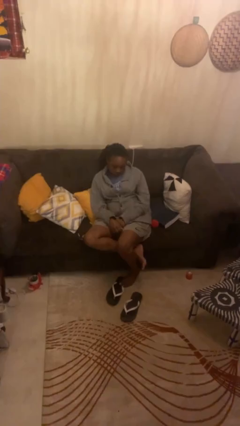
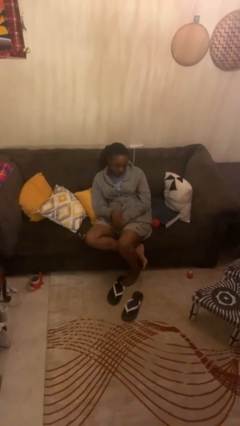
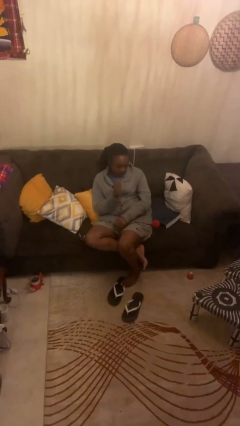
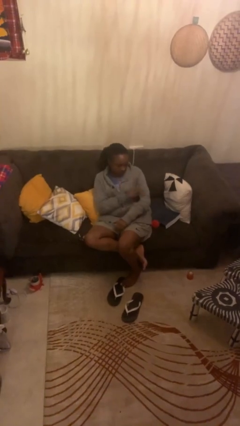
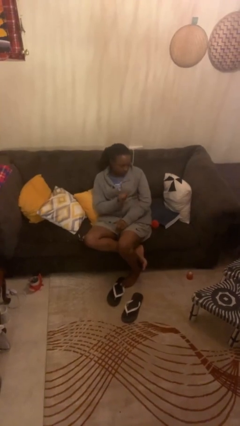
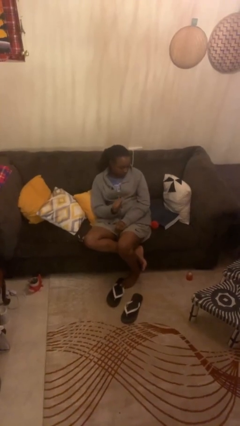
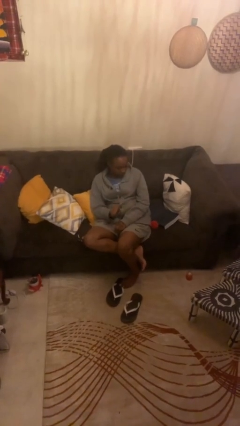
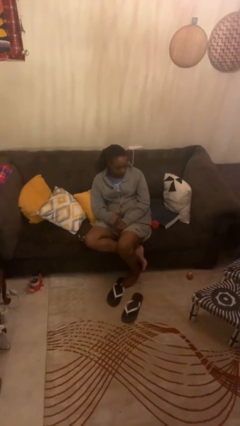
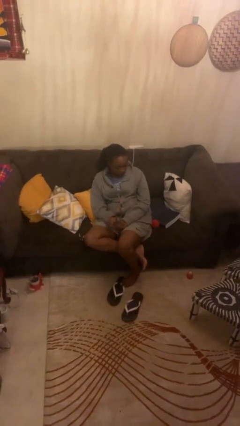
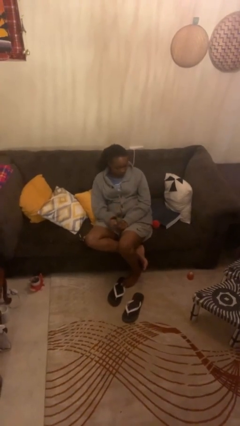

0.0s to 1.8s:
person swats bug

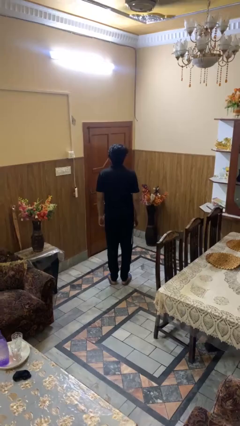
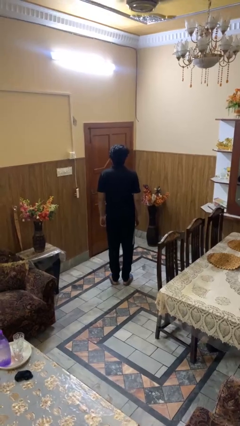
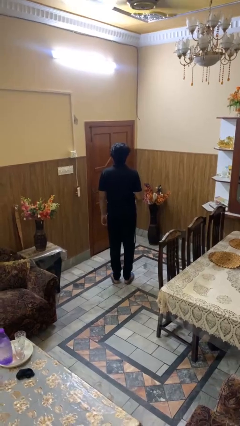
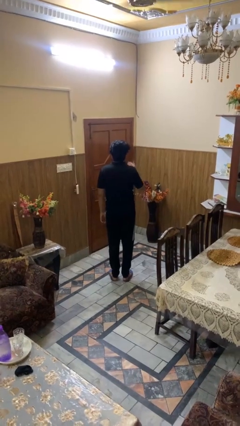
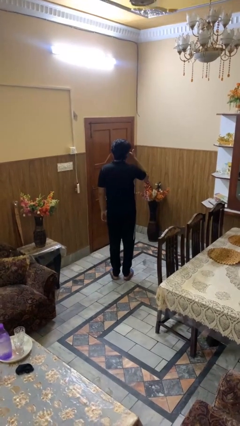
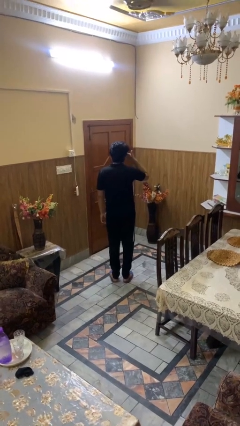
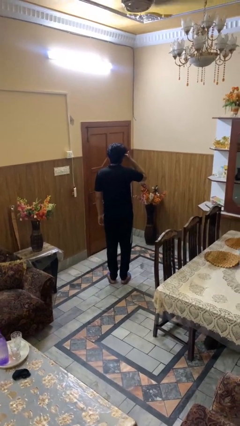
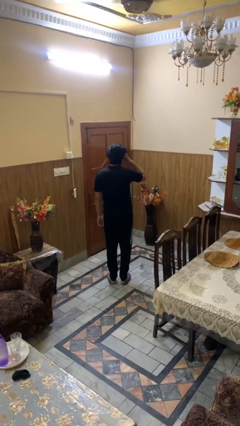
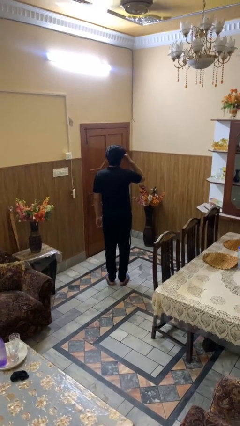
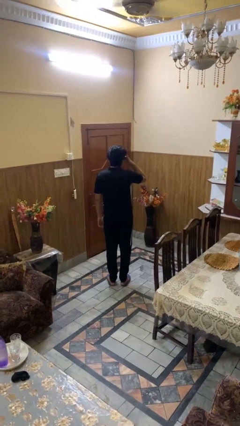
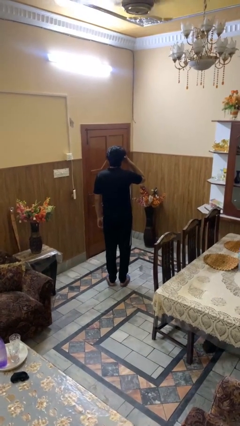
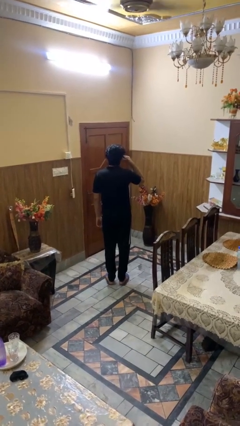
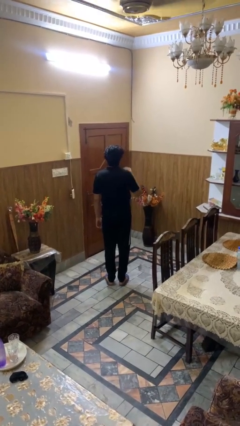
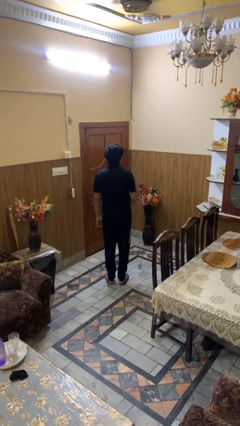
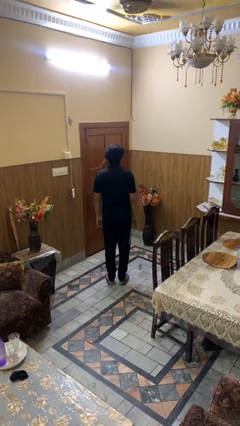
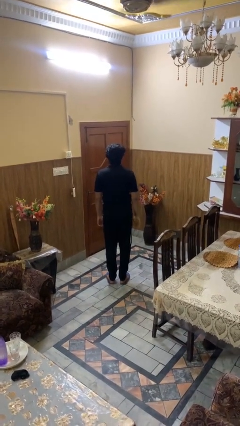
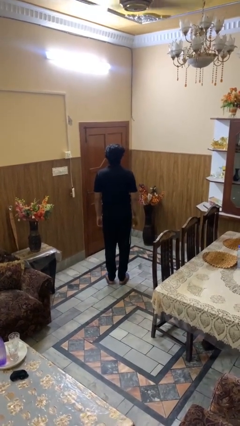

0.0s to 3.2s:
person rubs eyes

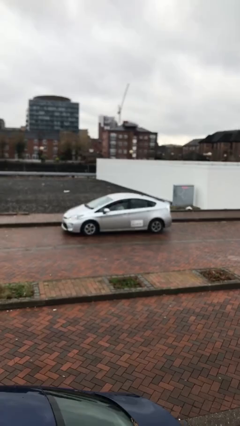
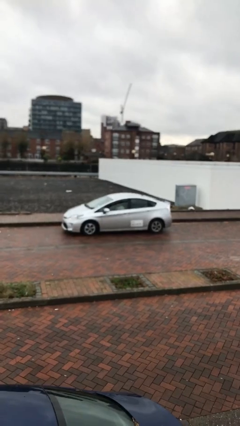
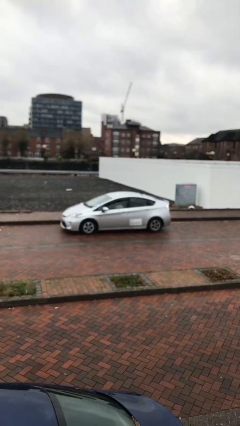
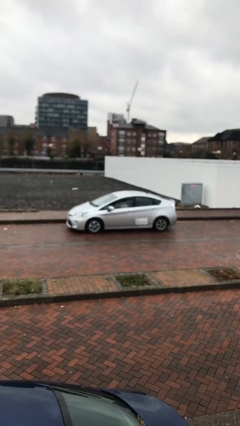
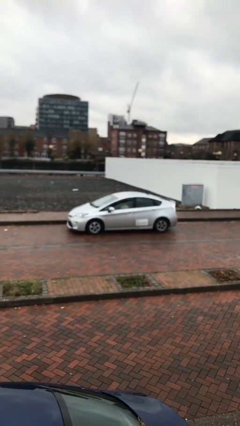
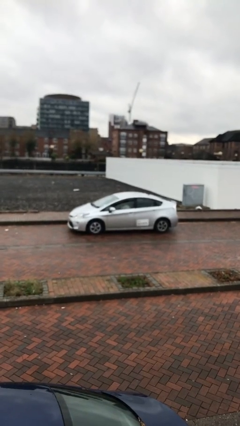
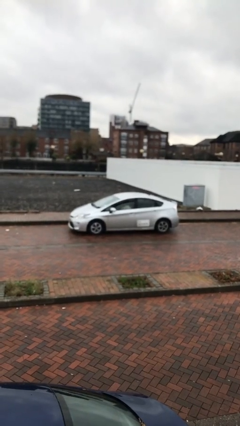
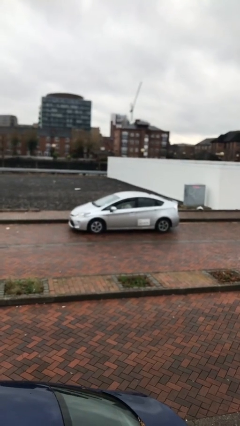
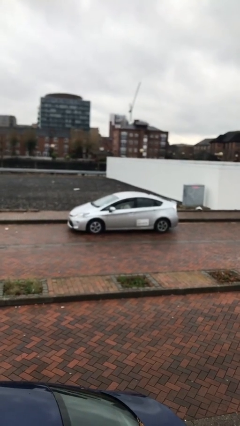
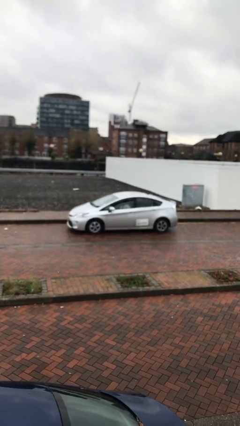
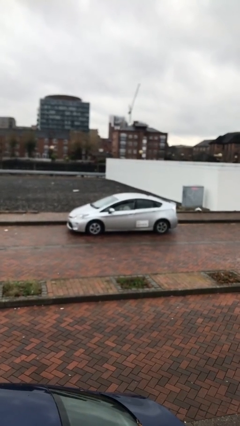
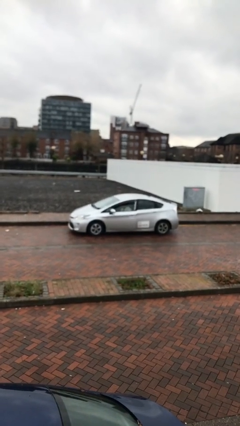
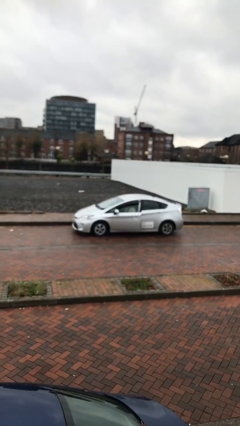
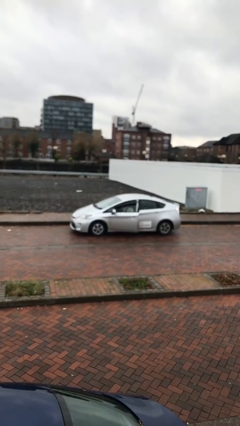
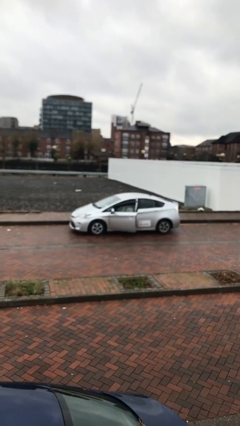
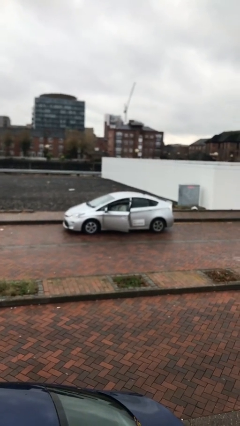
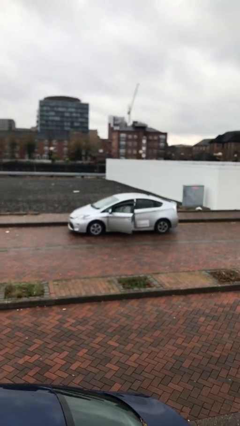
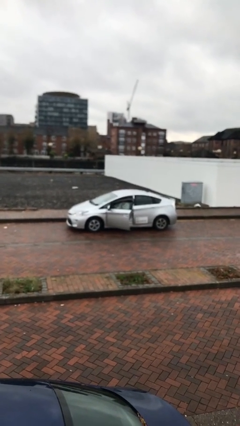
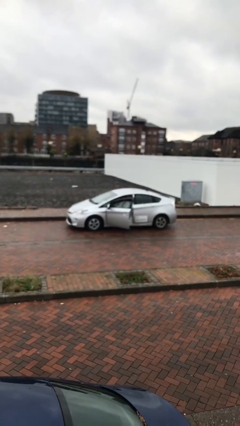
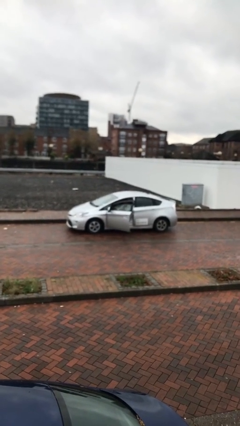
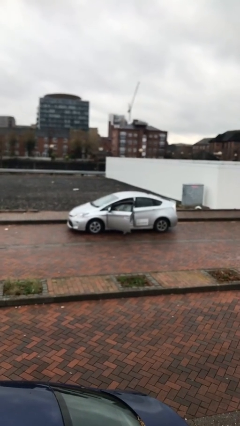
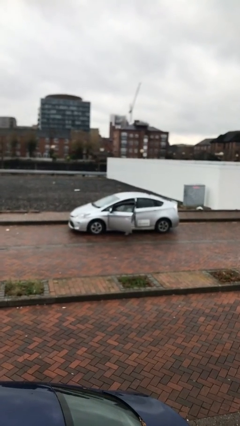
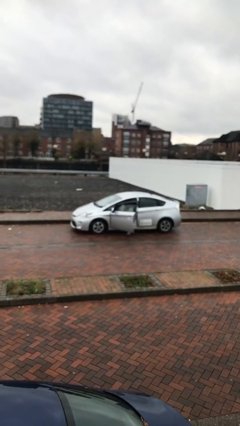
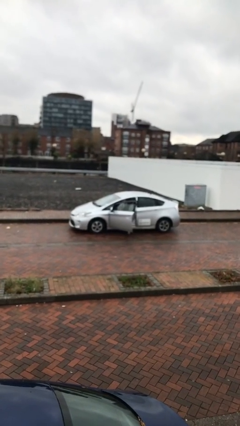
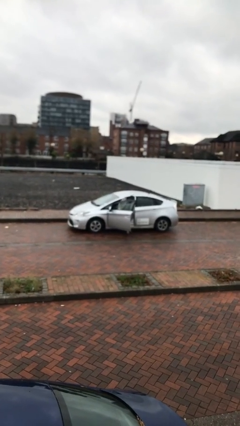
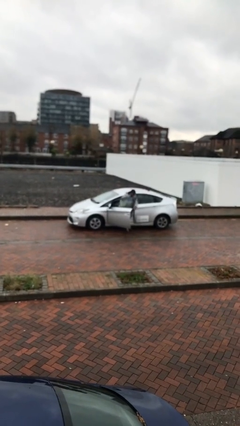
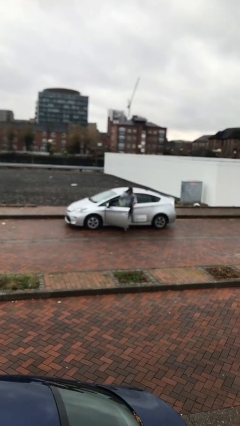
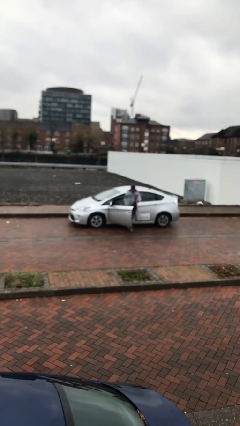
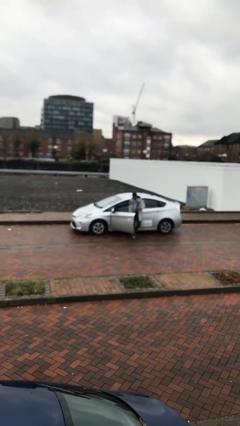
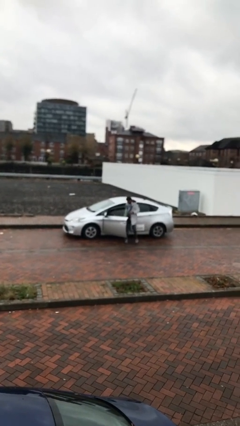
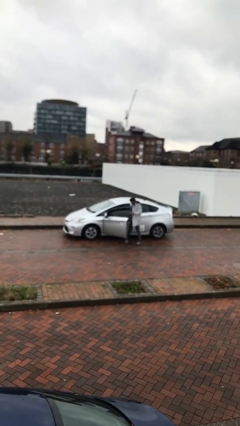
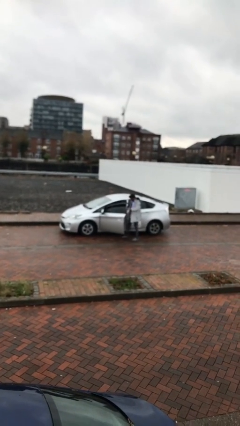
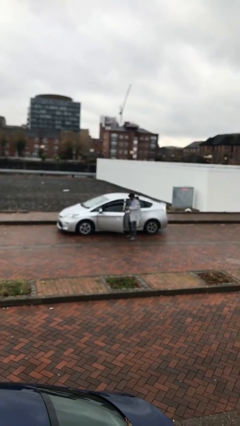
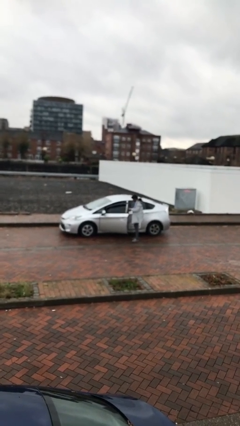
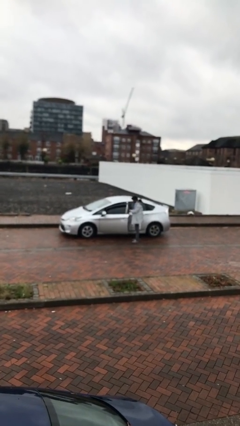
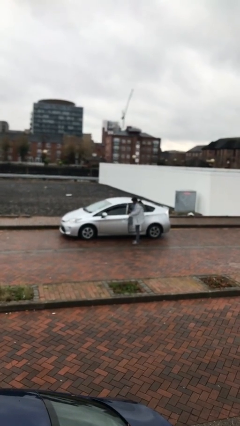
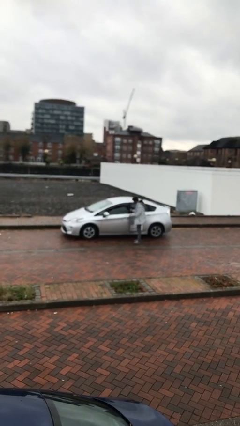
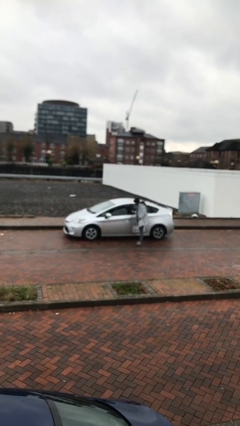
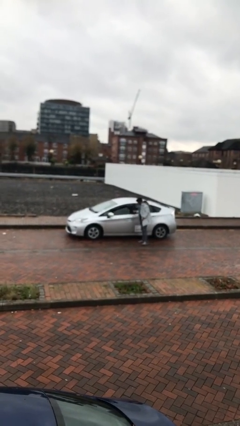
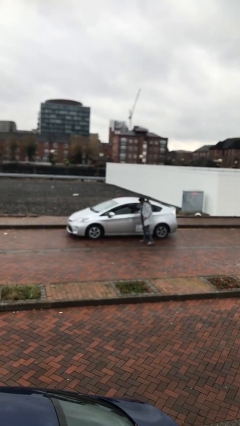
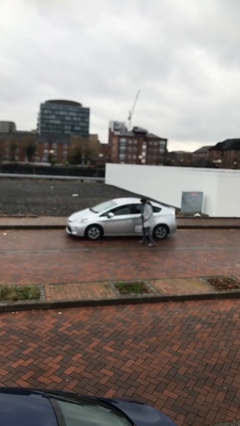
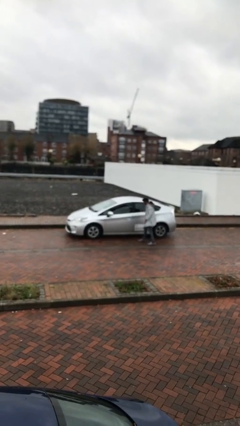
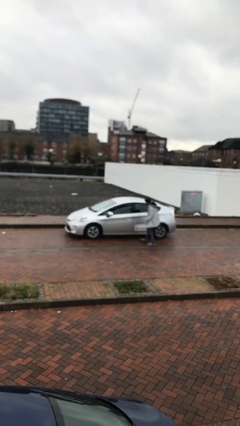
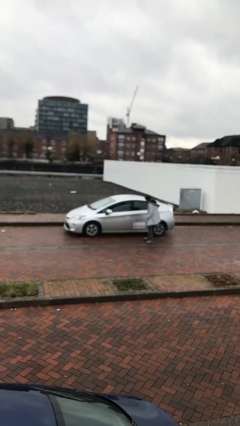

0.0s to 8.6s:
car drops off person

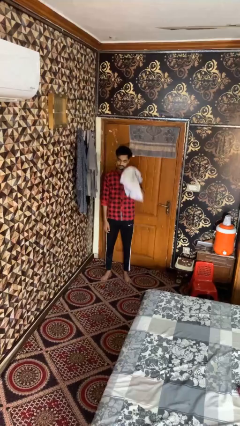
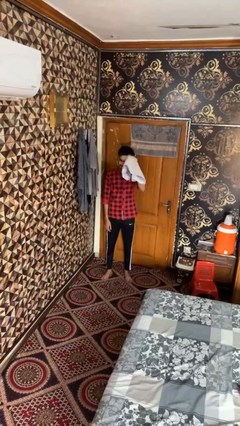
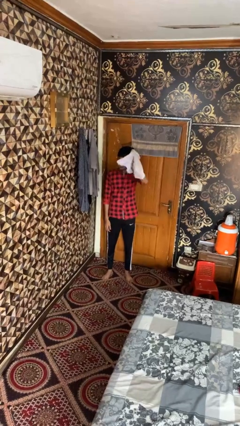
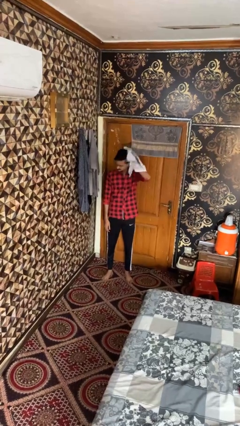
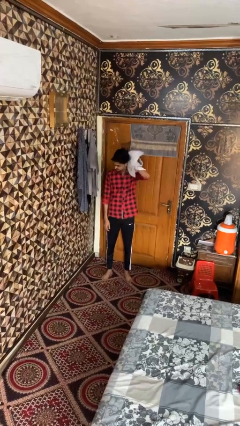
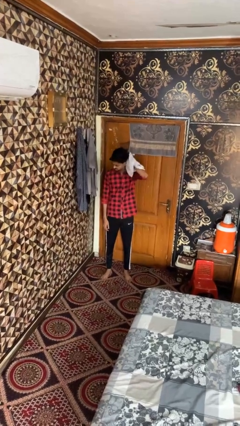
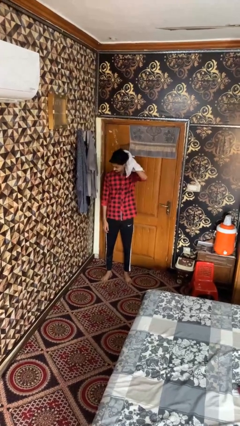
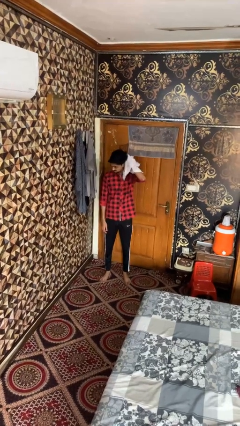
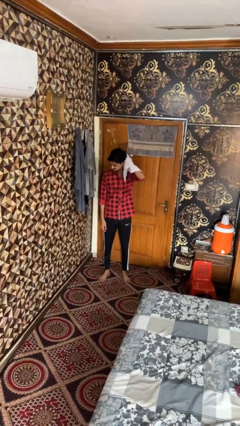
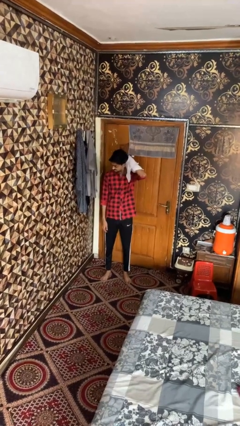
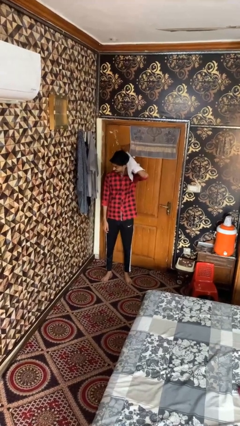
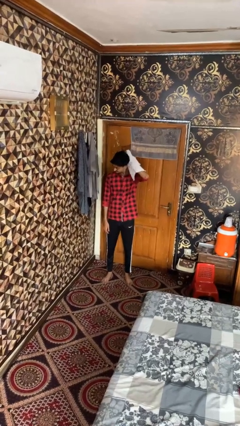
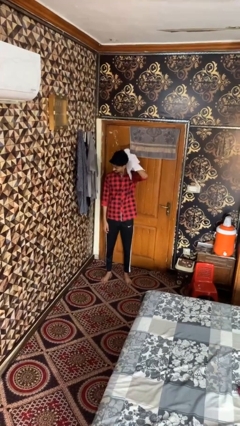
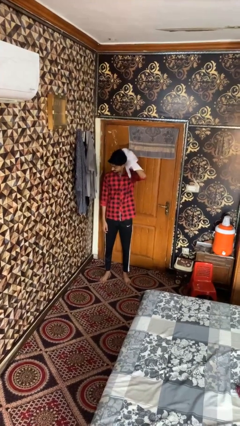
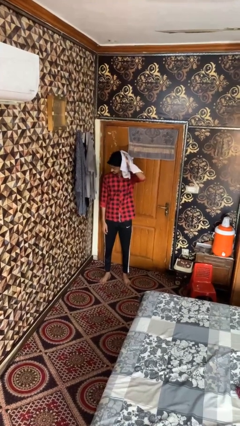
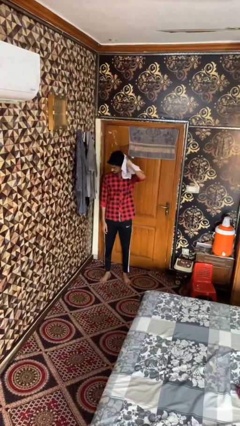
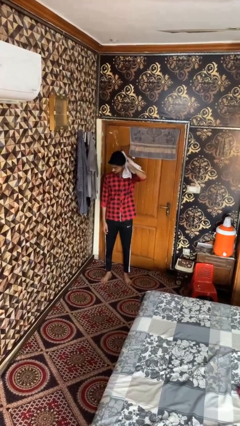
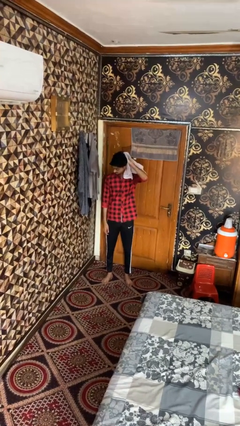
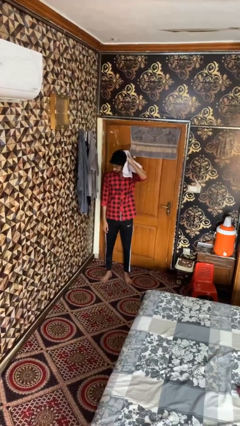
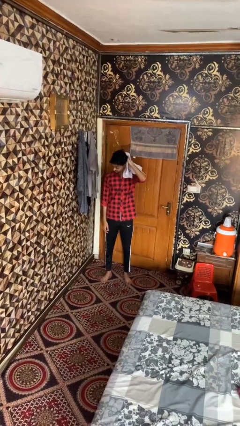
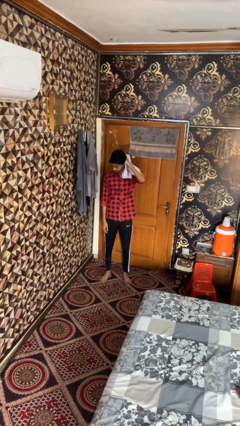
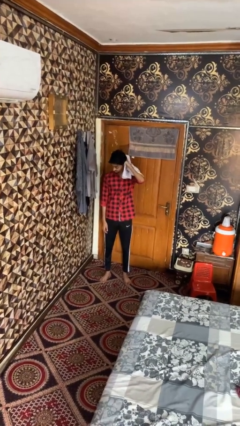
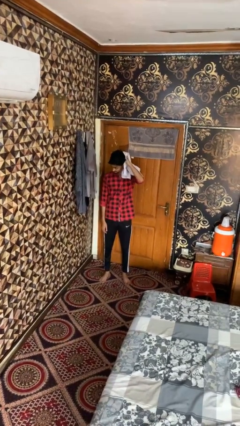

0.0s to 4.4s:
person dries hair with towel
